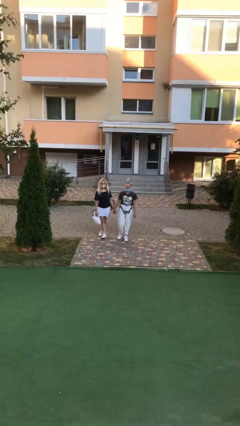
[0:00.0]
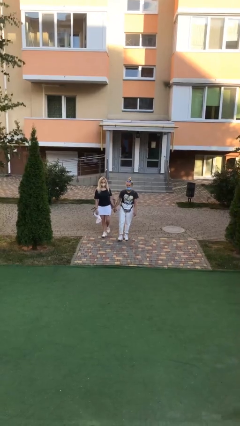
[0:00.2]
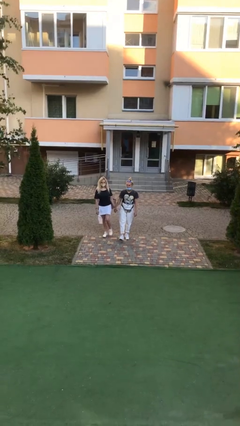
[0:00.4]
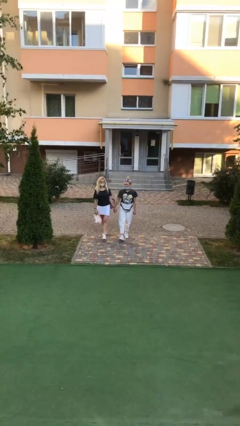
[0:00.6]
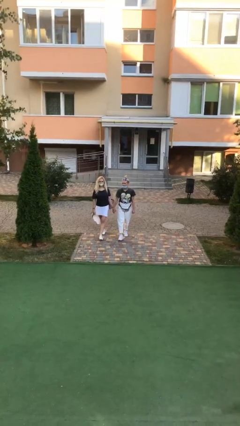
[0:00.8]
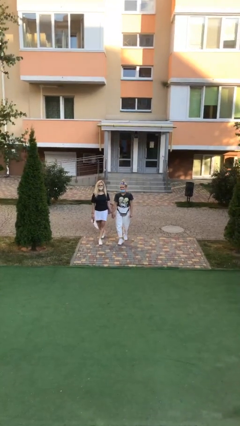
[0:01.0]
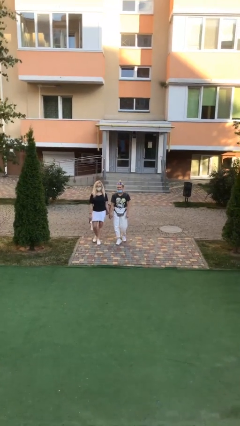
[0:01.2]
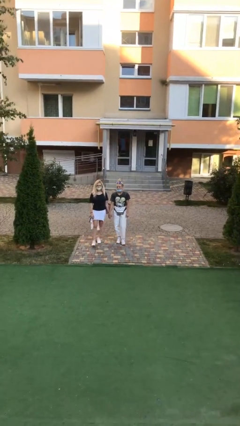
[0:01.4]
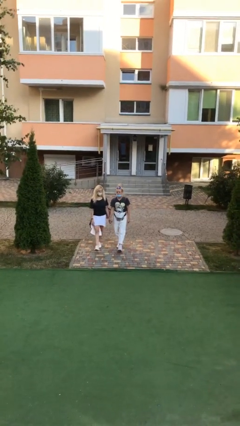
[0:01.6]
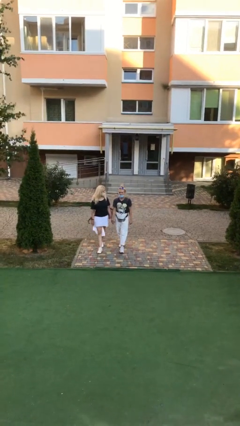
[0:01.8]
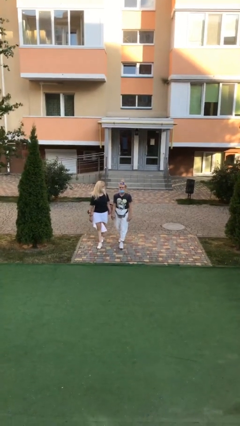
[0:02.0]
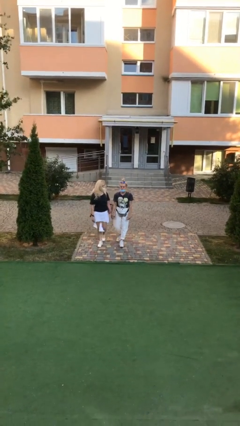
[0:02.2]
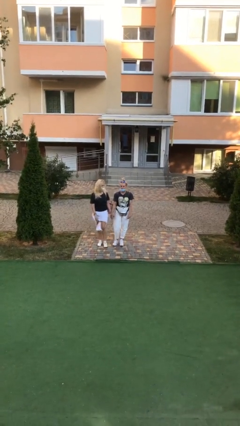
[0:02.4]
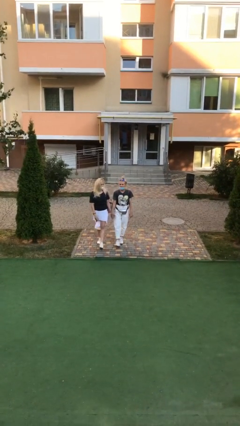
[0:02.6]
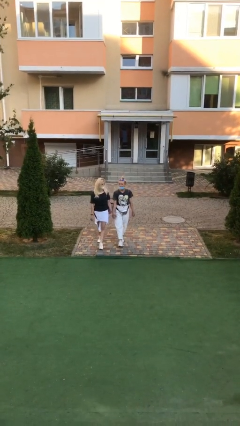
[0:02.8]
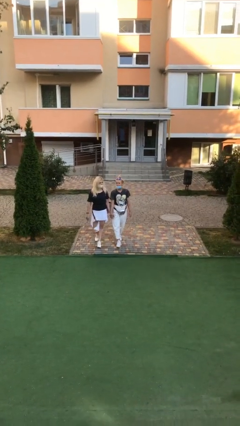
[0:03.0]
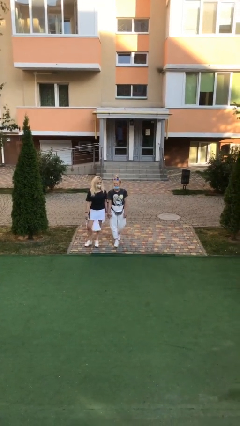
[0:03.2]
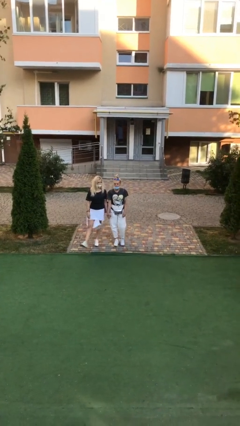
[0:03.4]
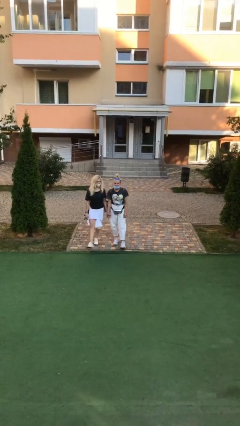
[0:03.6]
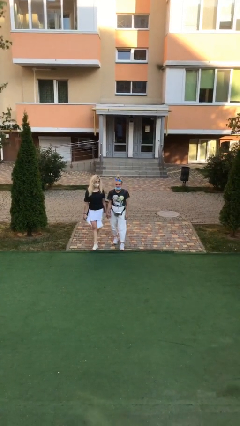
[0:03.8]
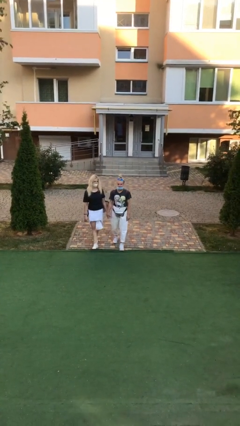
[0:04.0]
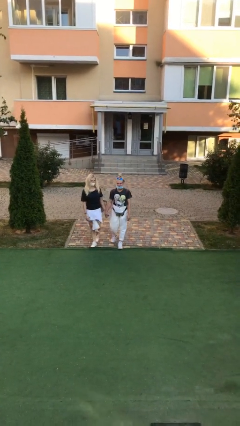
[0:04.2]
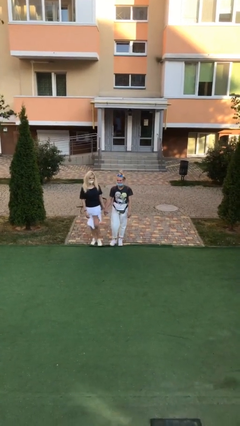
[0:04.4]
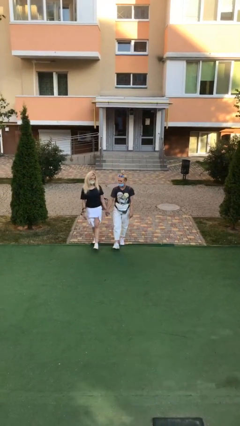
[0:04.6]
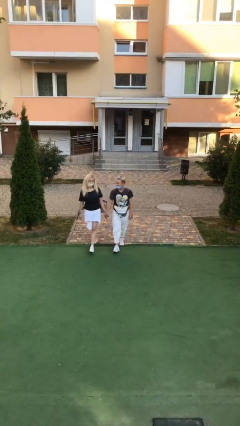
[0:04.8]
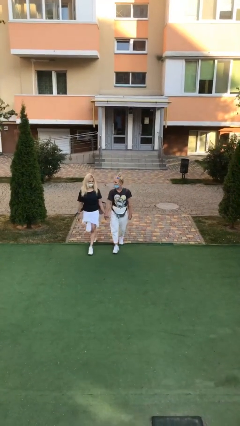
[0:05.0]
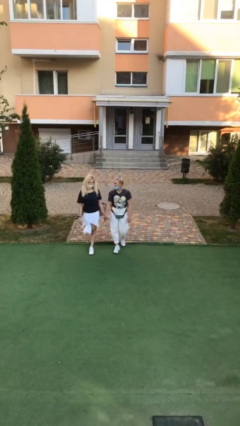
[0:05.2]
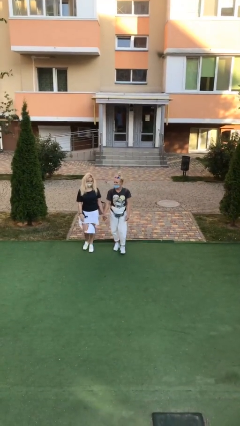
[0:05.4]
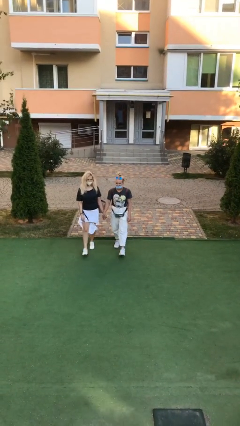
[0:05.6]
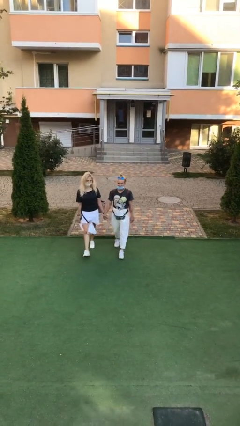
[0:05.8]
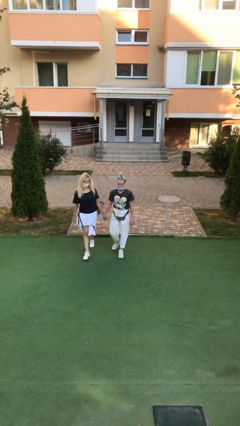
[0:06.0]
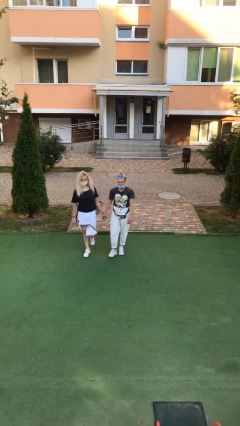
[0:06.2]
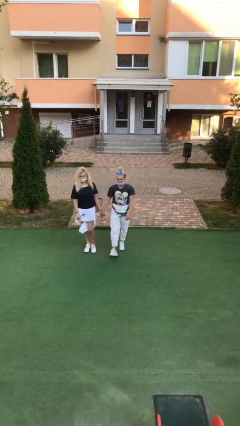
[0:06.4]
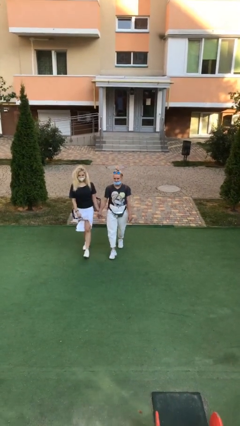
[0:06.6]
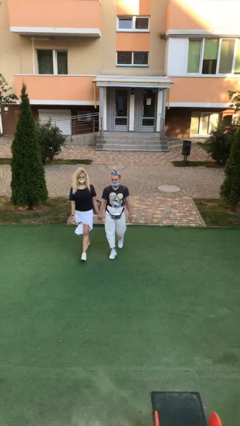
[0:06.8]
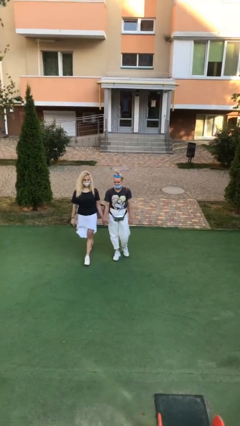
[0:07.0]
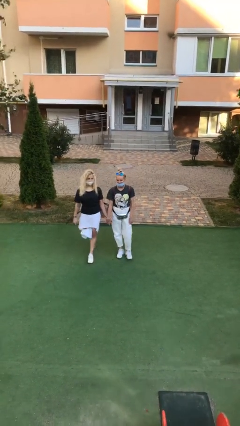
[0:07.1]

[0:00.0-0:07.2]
person holds hand

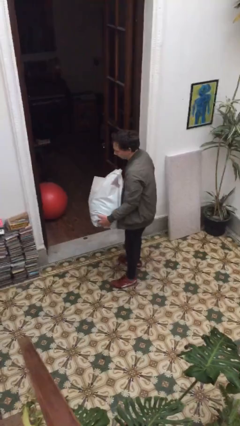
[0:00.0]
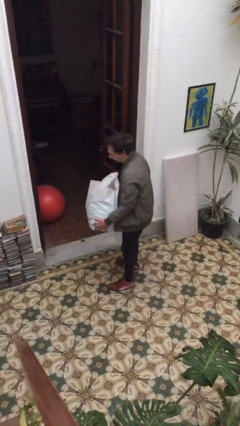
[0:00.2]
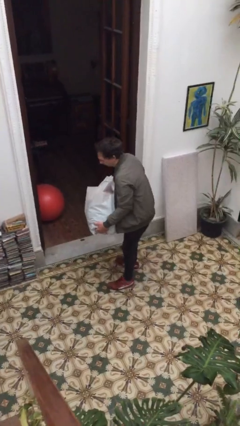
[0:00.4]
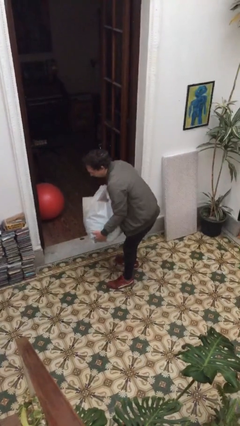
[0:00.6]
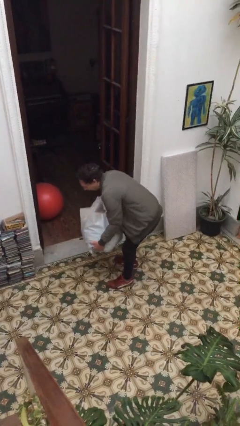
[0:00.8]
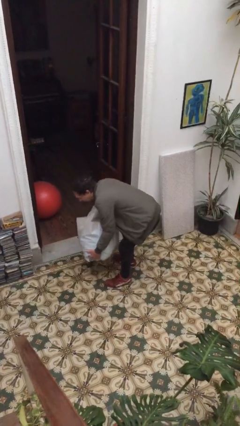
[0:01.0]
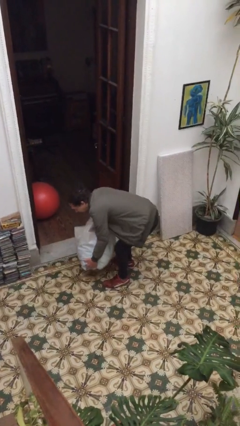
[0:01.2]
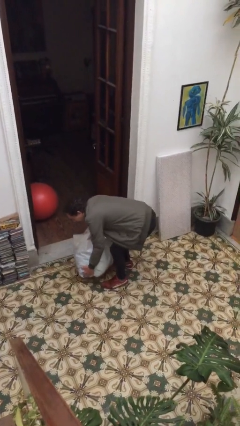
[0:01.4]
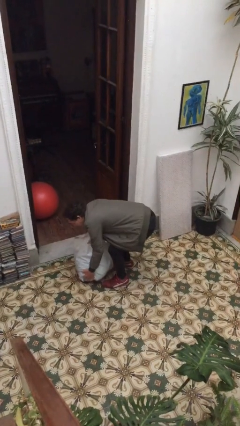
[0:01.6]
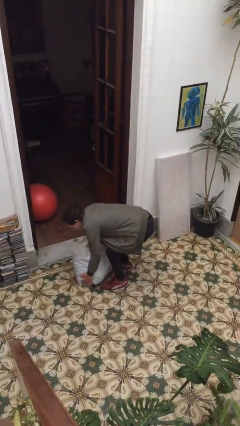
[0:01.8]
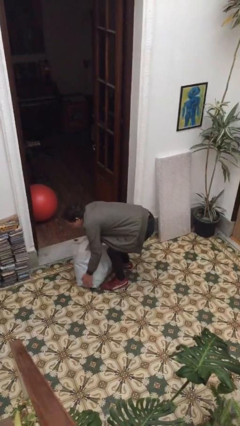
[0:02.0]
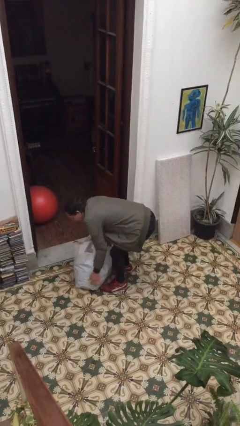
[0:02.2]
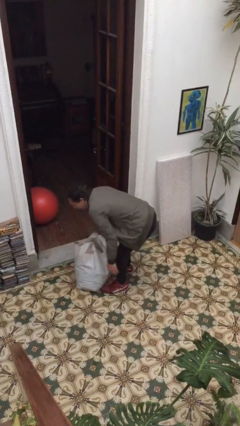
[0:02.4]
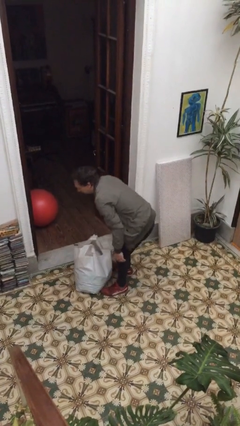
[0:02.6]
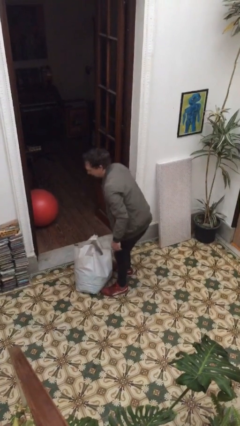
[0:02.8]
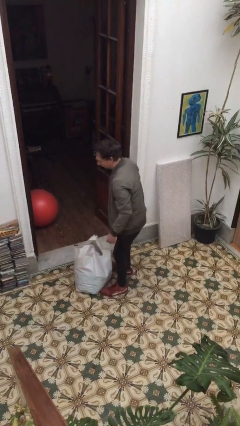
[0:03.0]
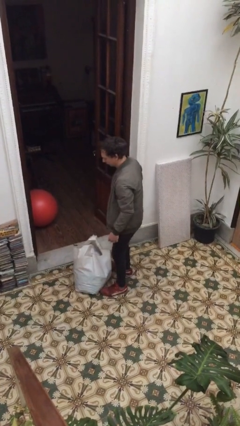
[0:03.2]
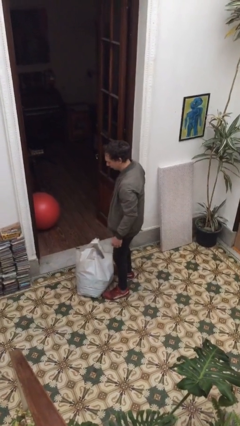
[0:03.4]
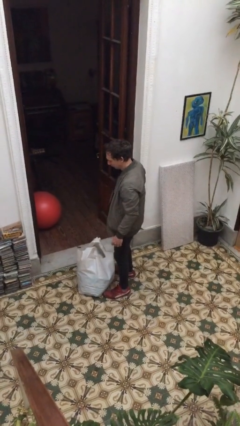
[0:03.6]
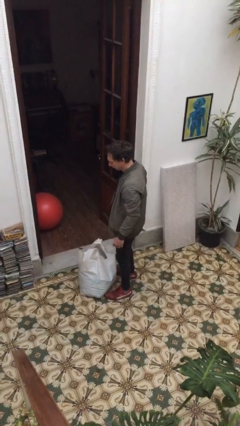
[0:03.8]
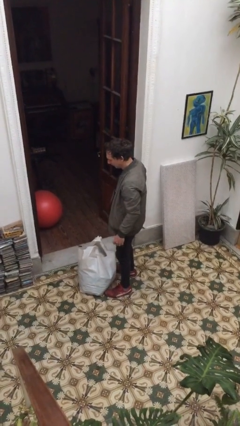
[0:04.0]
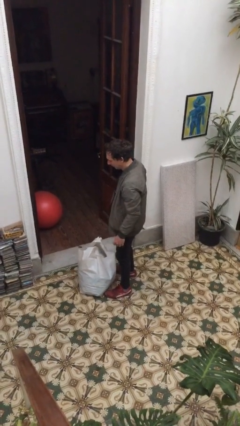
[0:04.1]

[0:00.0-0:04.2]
person puts down object on floor

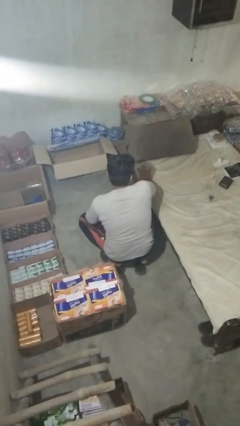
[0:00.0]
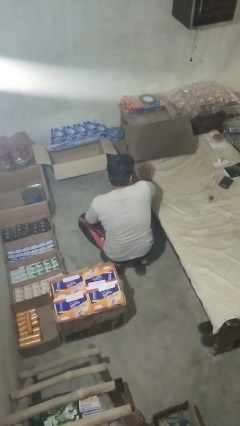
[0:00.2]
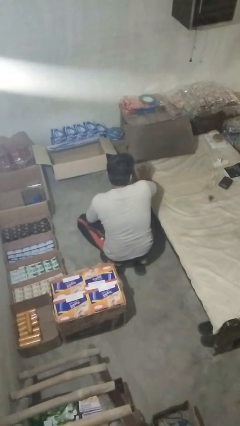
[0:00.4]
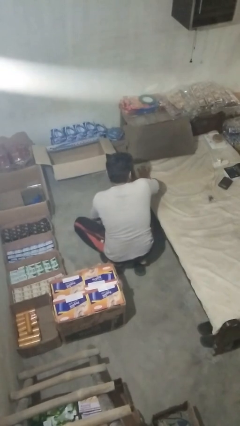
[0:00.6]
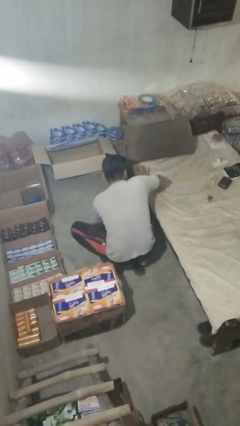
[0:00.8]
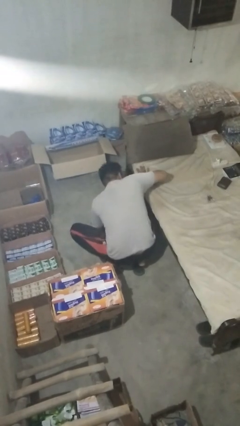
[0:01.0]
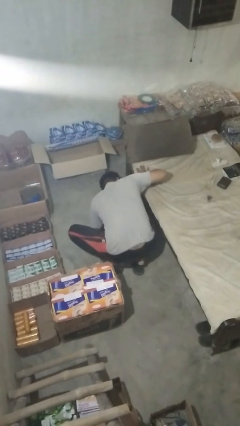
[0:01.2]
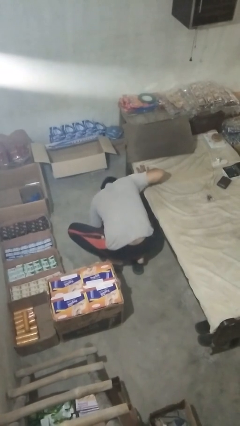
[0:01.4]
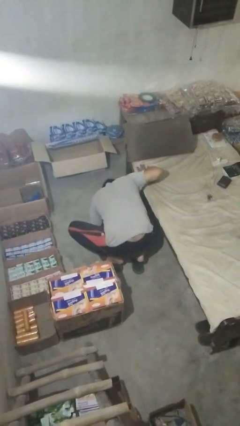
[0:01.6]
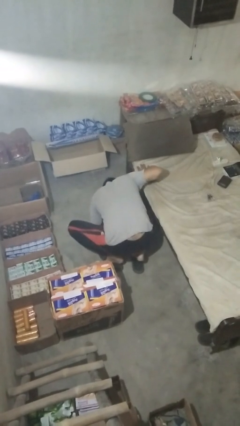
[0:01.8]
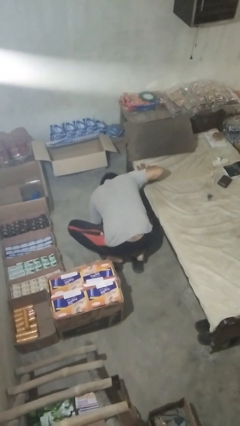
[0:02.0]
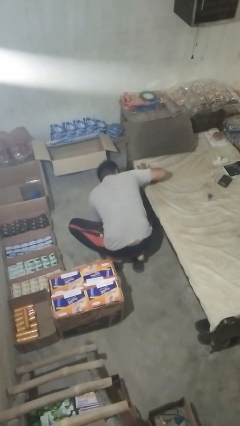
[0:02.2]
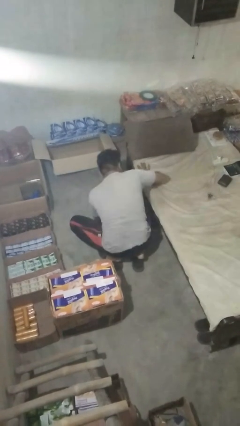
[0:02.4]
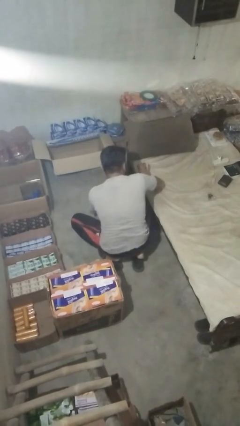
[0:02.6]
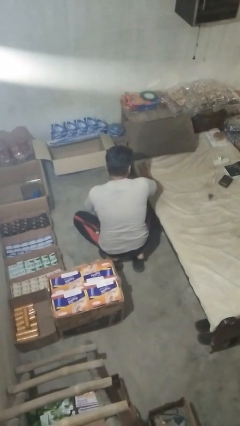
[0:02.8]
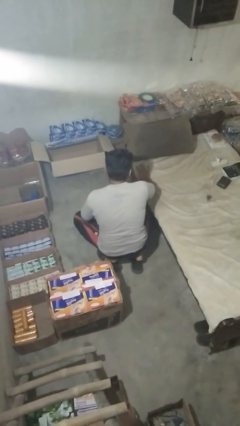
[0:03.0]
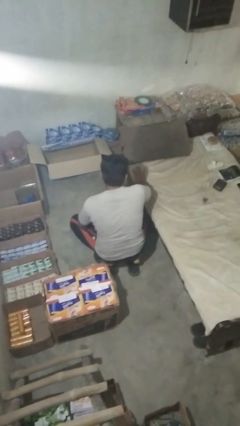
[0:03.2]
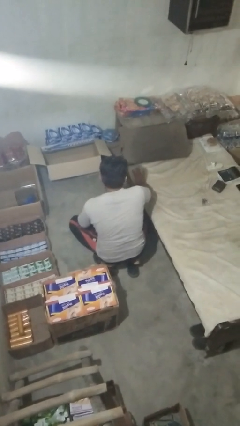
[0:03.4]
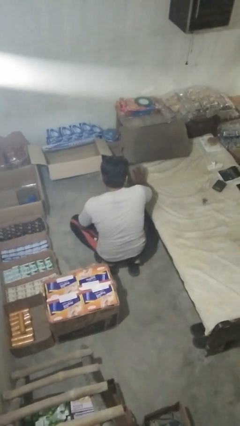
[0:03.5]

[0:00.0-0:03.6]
person searches under bed

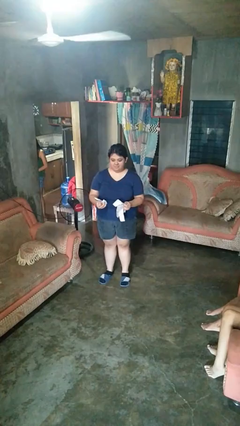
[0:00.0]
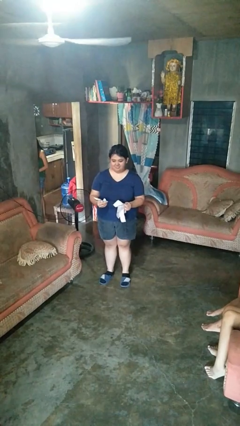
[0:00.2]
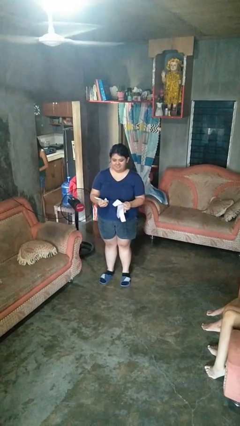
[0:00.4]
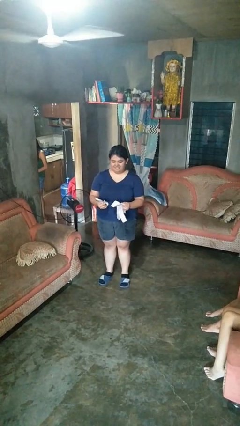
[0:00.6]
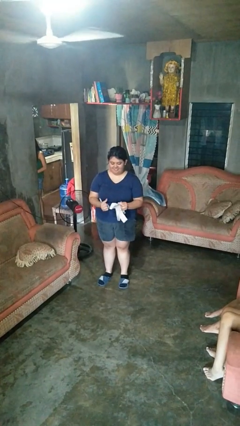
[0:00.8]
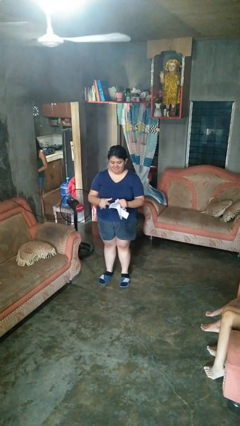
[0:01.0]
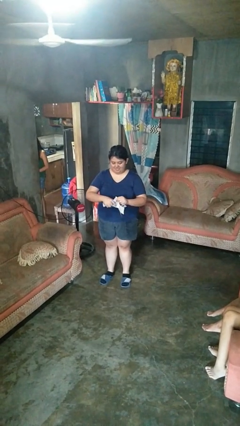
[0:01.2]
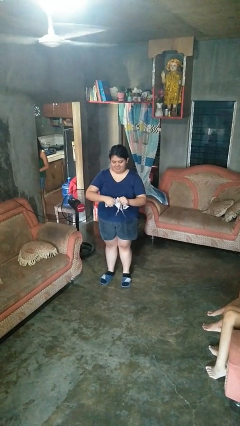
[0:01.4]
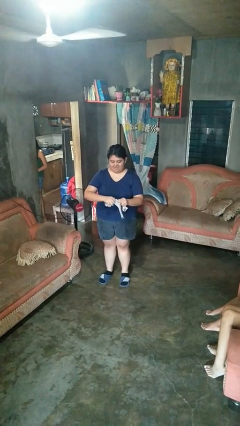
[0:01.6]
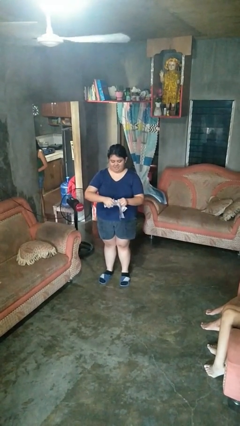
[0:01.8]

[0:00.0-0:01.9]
person tears paper

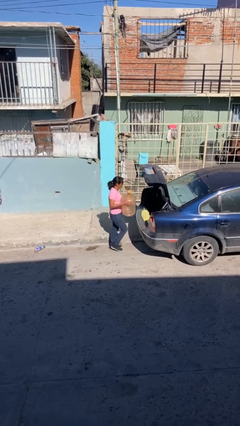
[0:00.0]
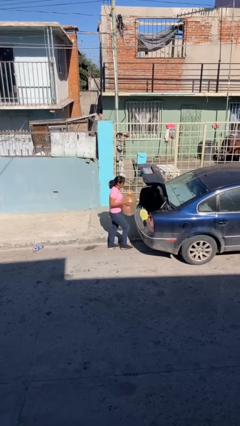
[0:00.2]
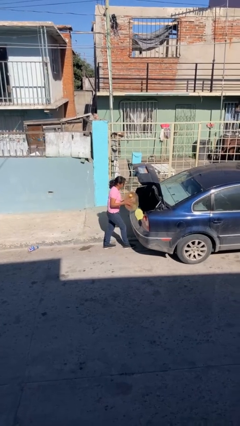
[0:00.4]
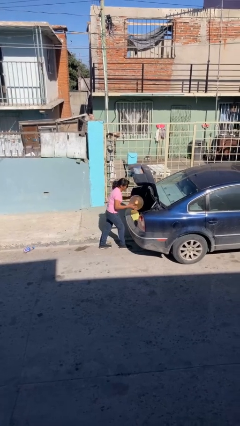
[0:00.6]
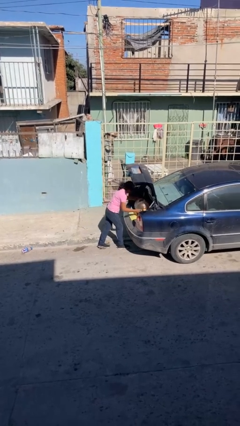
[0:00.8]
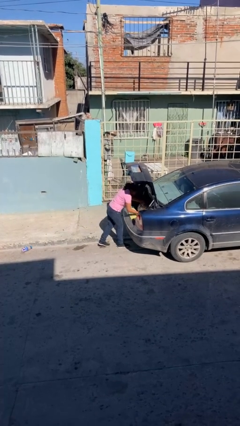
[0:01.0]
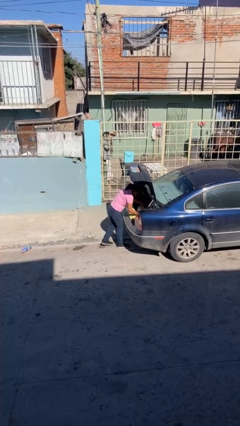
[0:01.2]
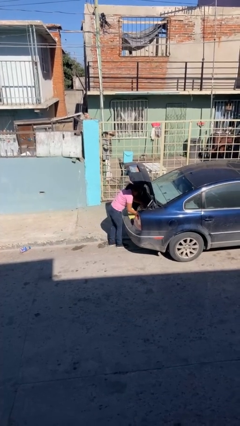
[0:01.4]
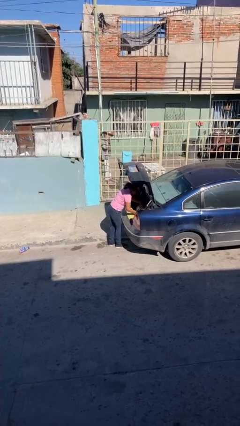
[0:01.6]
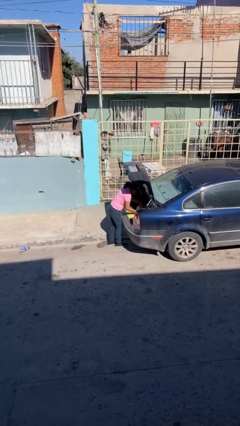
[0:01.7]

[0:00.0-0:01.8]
person loads car
